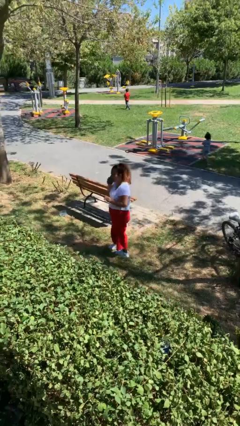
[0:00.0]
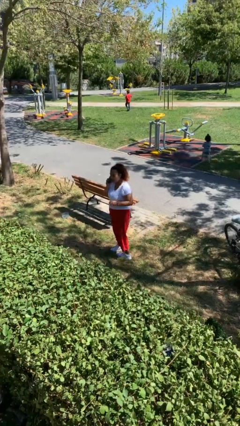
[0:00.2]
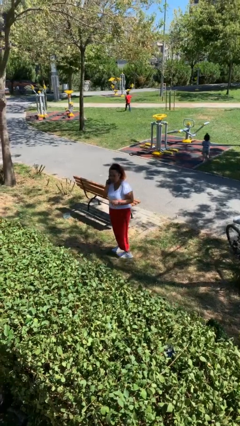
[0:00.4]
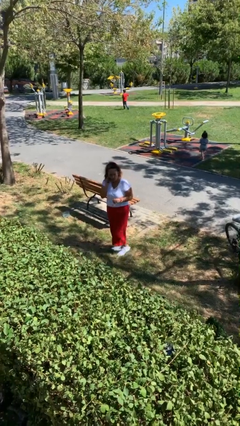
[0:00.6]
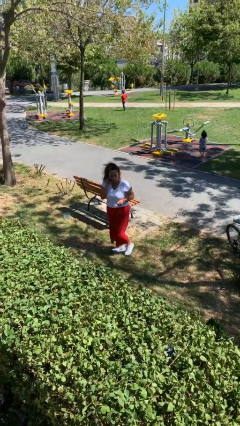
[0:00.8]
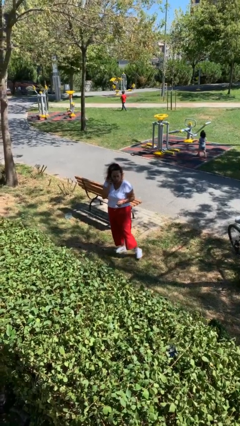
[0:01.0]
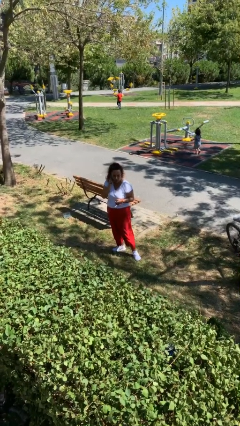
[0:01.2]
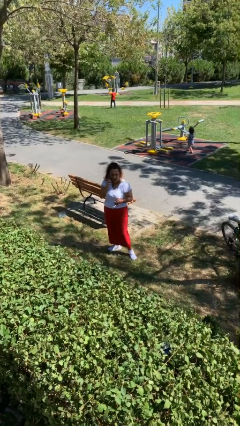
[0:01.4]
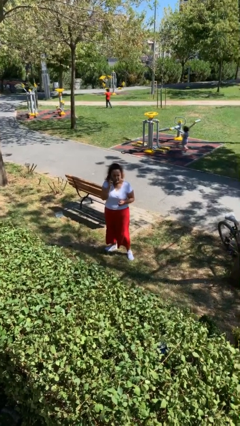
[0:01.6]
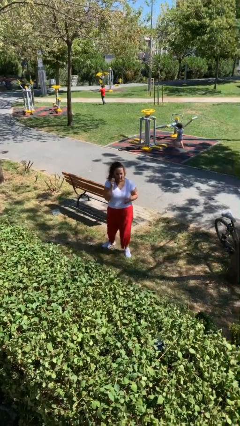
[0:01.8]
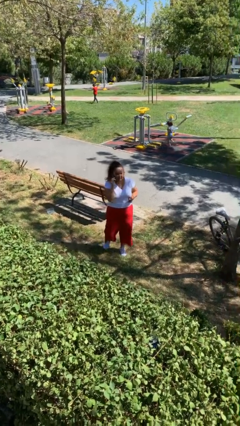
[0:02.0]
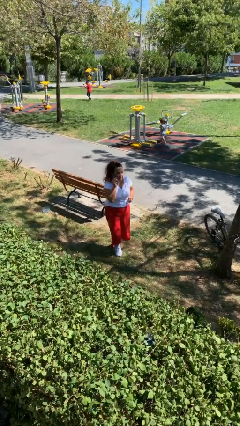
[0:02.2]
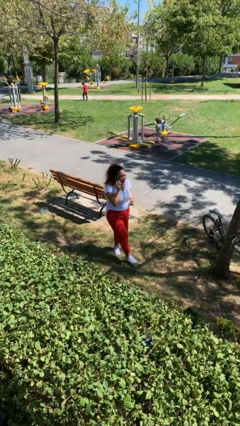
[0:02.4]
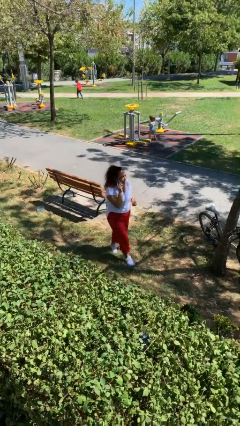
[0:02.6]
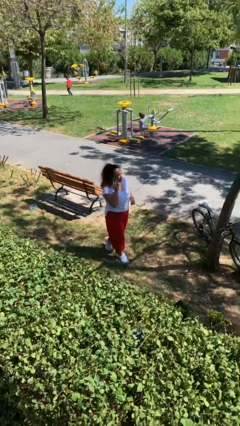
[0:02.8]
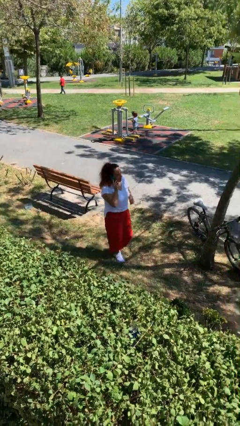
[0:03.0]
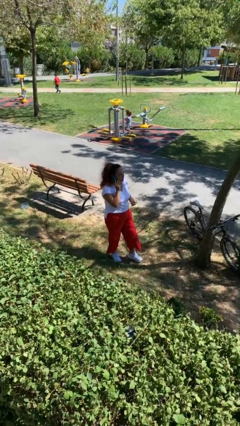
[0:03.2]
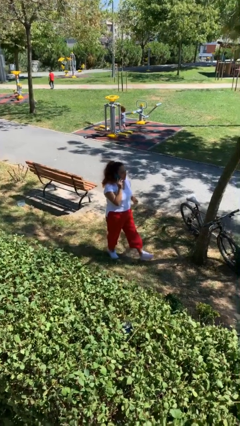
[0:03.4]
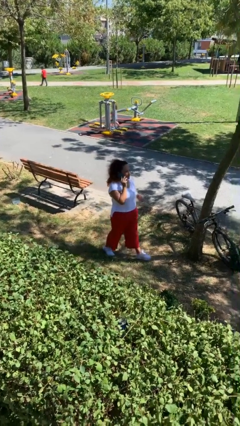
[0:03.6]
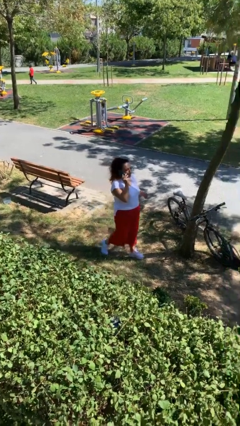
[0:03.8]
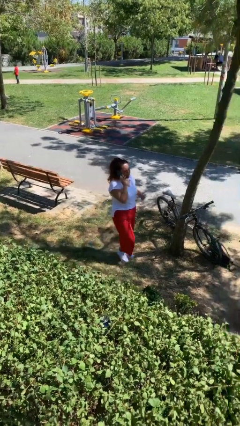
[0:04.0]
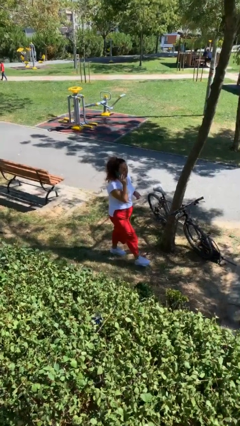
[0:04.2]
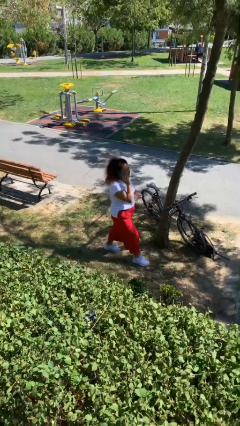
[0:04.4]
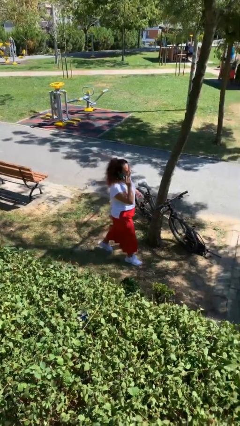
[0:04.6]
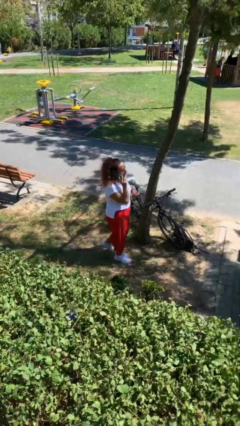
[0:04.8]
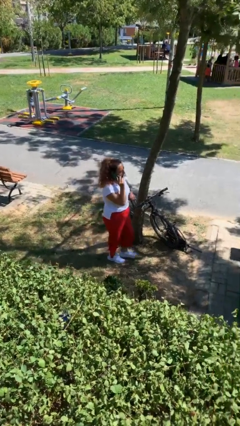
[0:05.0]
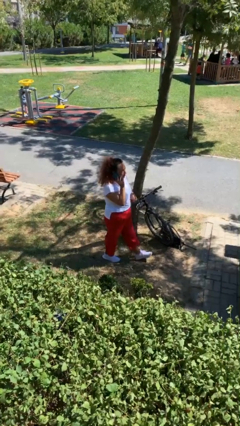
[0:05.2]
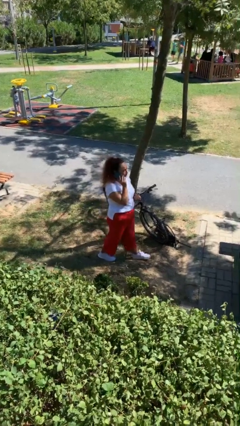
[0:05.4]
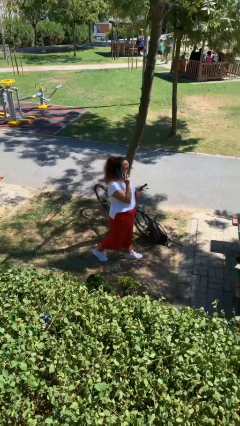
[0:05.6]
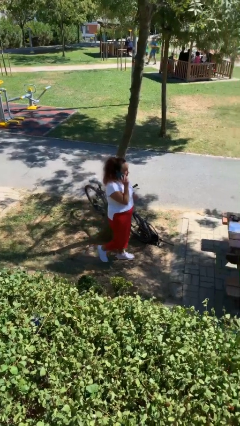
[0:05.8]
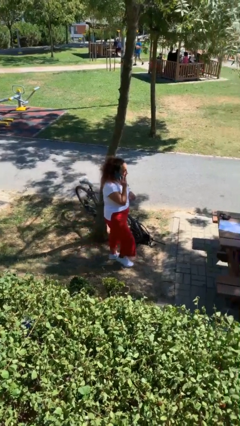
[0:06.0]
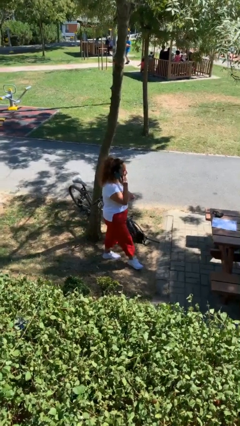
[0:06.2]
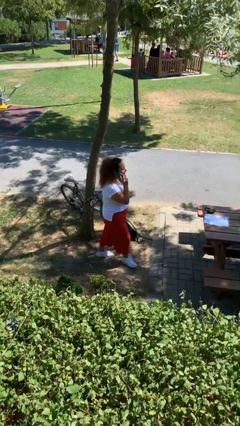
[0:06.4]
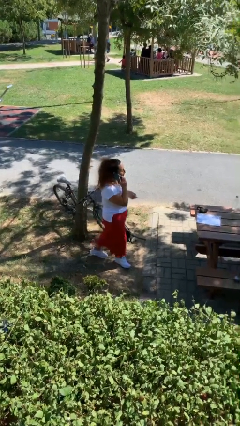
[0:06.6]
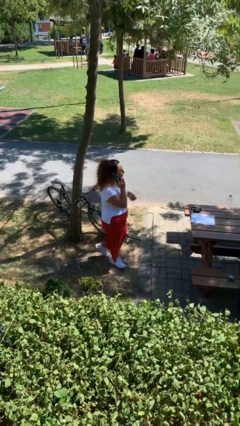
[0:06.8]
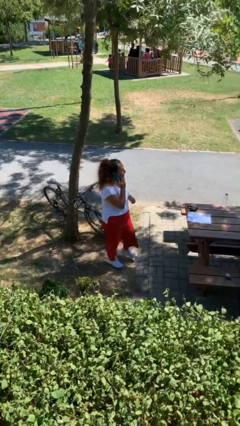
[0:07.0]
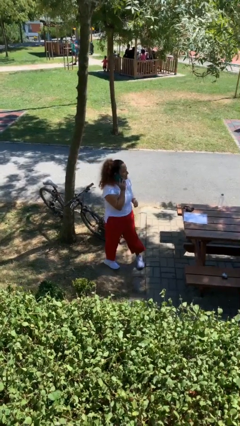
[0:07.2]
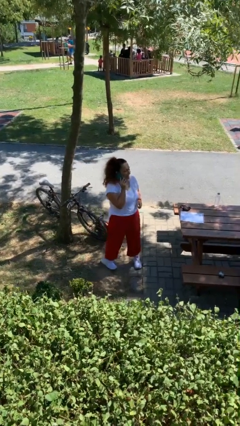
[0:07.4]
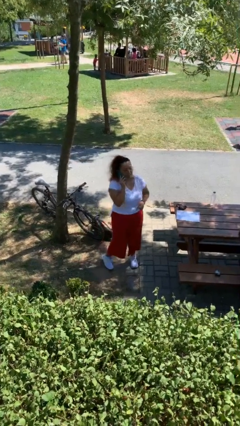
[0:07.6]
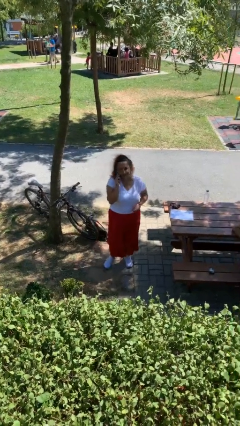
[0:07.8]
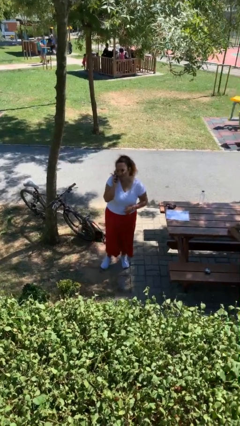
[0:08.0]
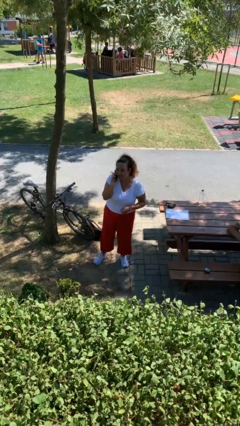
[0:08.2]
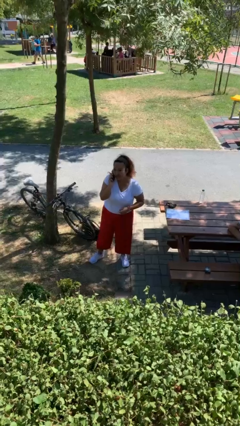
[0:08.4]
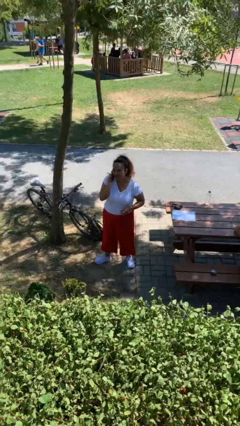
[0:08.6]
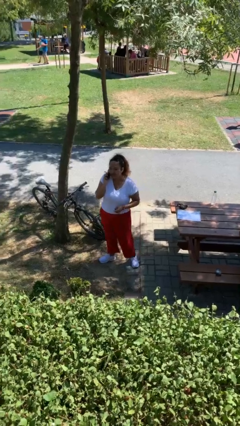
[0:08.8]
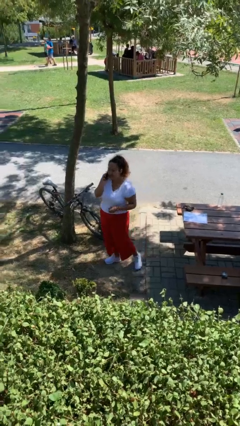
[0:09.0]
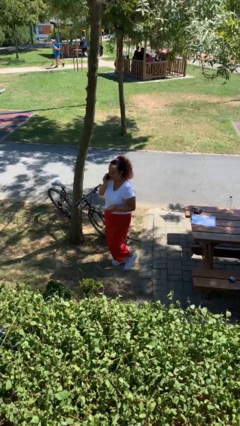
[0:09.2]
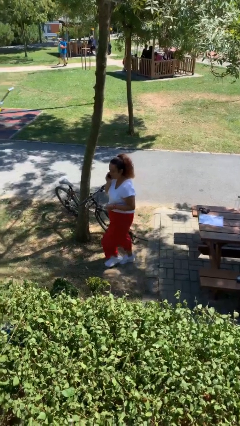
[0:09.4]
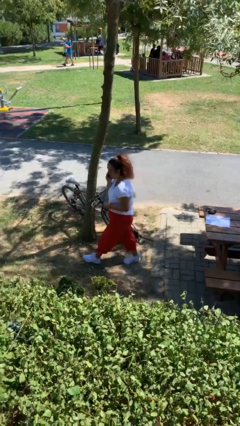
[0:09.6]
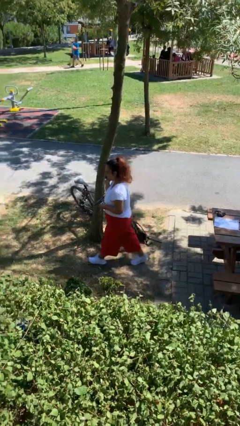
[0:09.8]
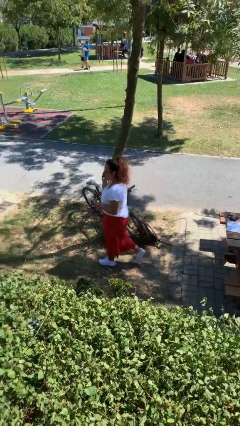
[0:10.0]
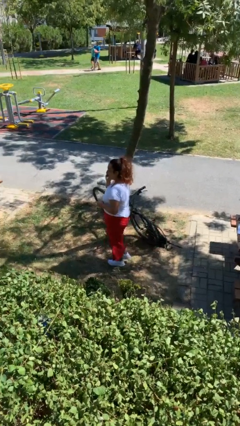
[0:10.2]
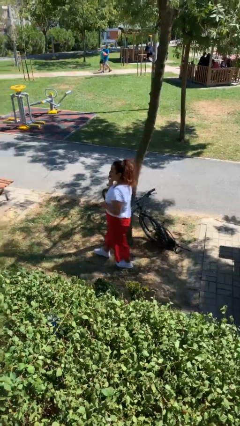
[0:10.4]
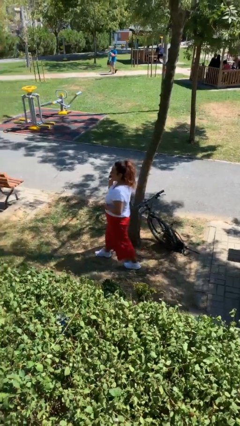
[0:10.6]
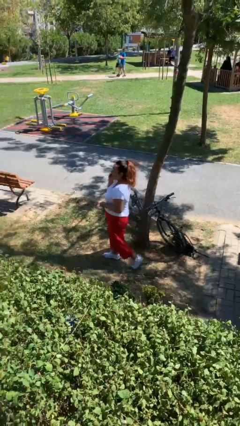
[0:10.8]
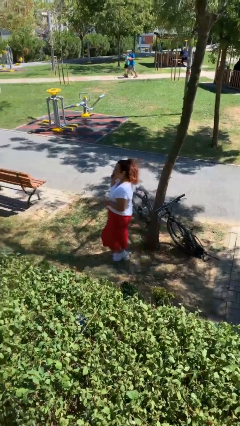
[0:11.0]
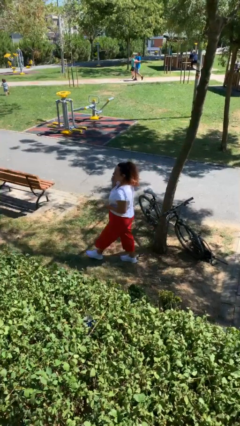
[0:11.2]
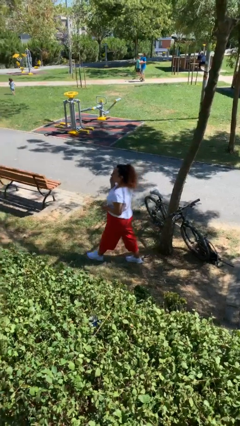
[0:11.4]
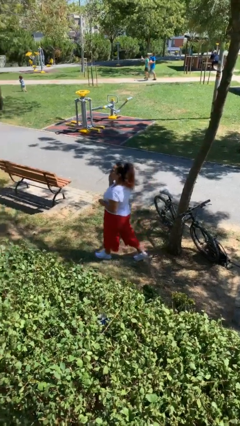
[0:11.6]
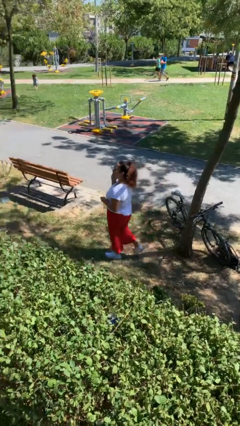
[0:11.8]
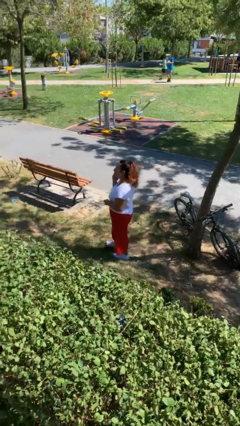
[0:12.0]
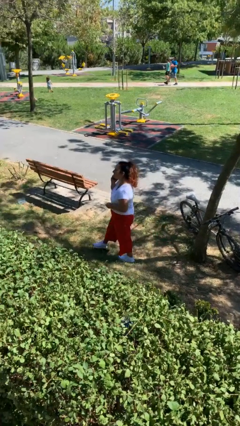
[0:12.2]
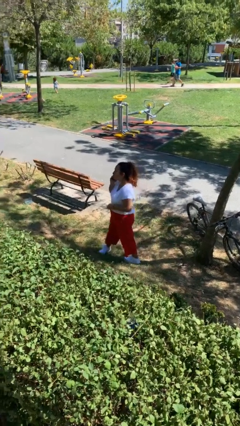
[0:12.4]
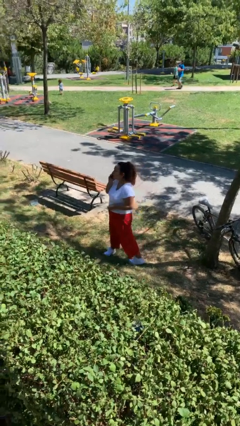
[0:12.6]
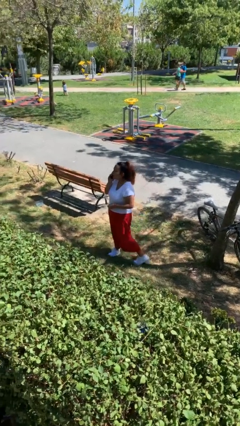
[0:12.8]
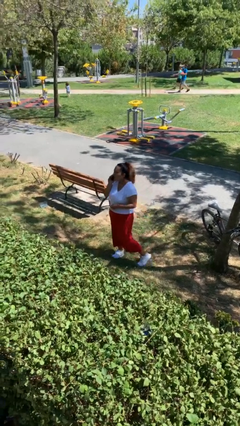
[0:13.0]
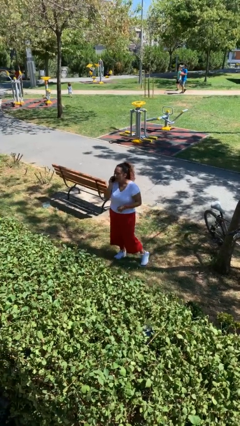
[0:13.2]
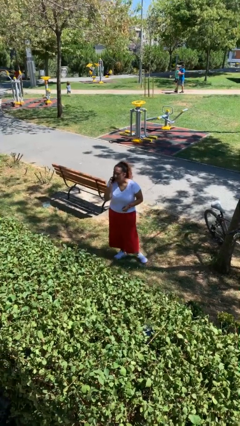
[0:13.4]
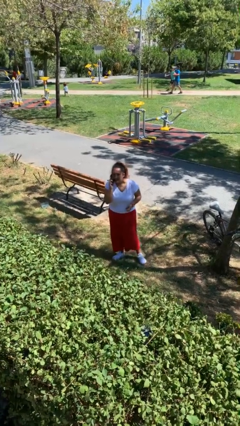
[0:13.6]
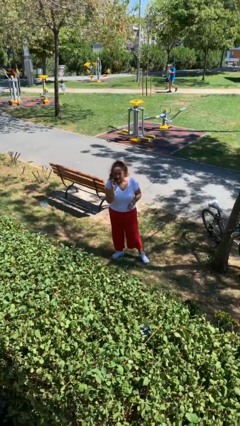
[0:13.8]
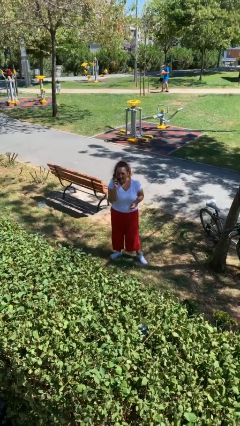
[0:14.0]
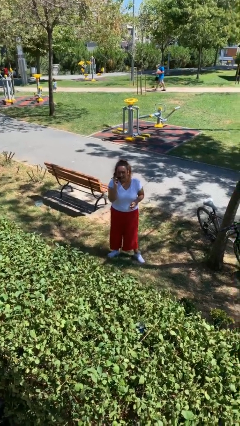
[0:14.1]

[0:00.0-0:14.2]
person talks on phone

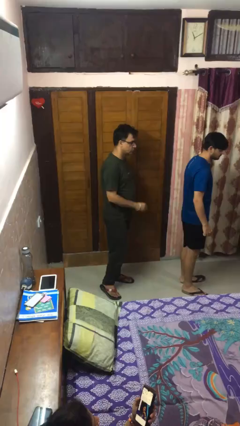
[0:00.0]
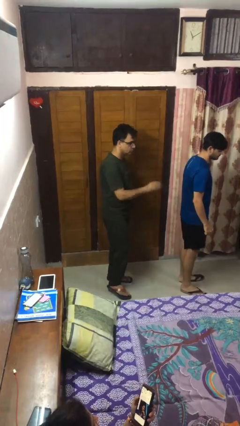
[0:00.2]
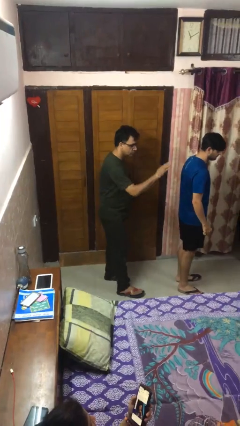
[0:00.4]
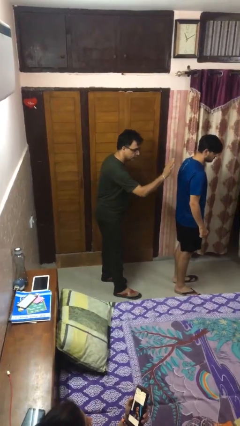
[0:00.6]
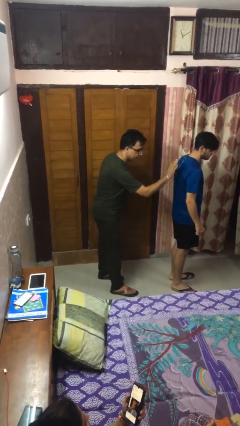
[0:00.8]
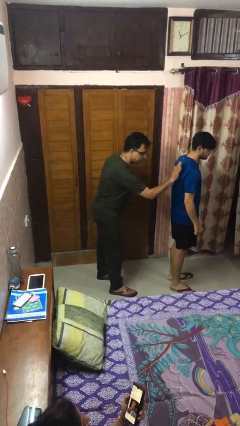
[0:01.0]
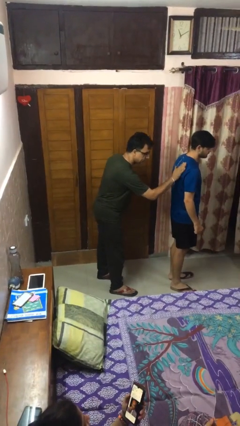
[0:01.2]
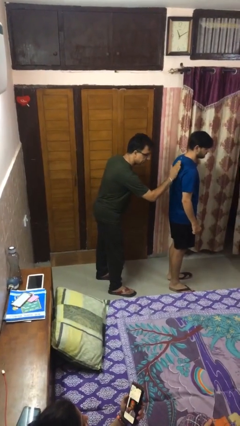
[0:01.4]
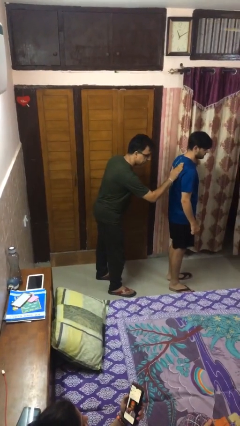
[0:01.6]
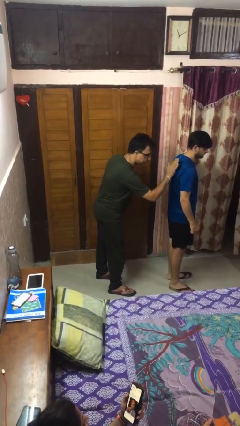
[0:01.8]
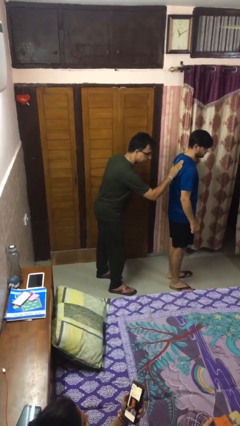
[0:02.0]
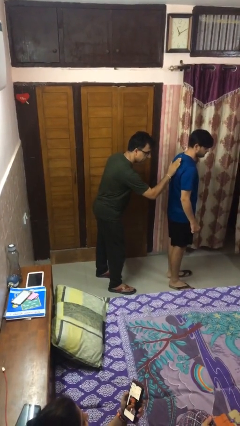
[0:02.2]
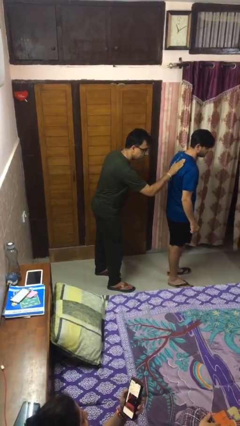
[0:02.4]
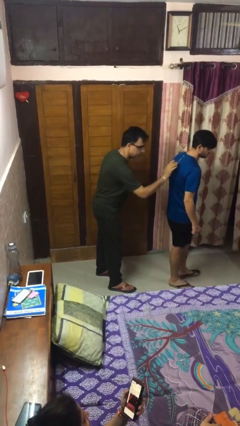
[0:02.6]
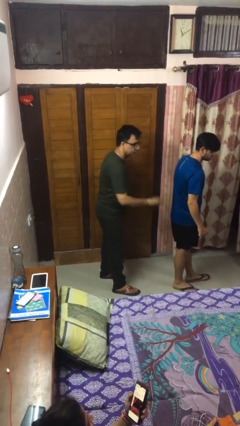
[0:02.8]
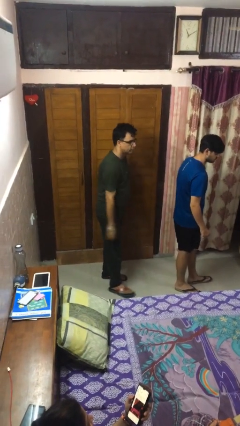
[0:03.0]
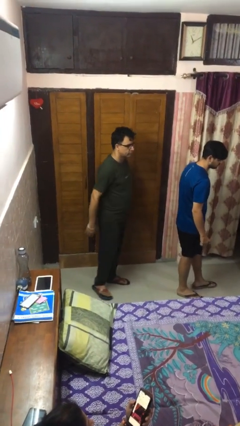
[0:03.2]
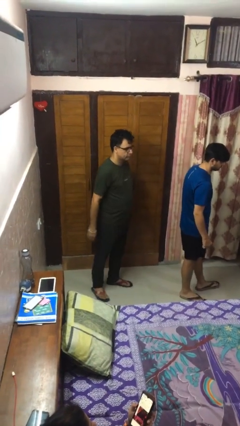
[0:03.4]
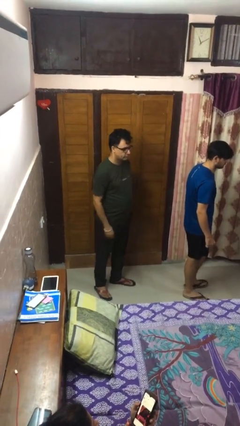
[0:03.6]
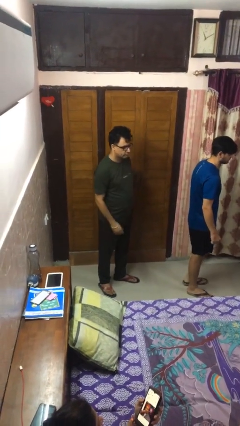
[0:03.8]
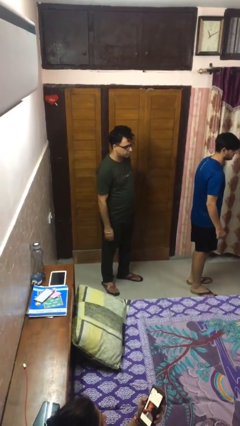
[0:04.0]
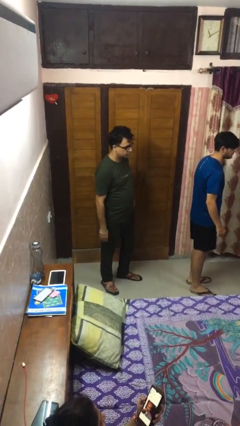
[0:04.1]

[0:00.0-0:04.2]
person touches back of person
